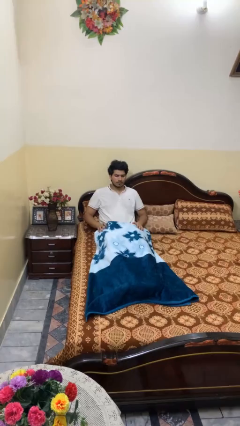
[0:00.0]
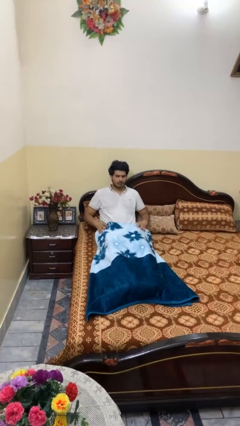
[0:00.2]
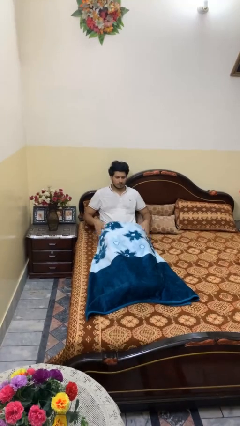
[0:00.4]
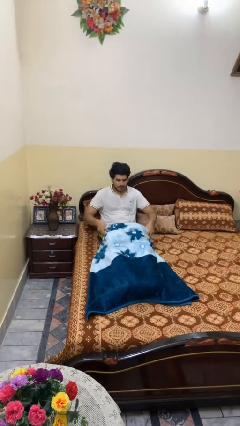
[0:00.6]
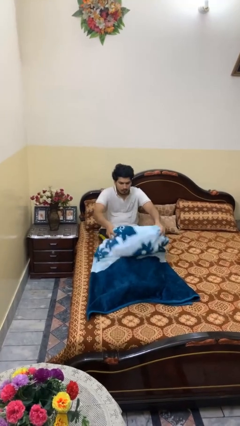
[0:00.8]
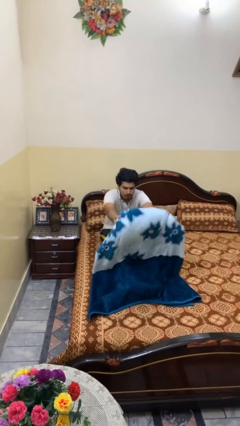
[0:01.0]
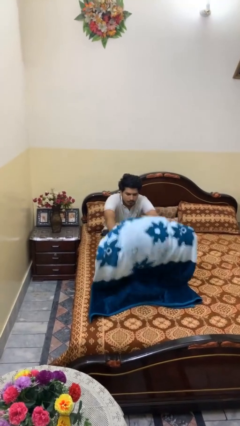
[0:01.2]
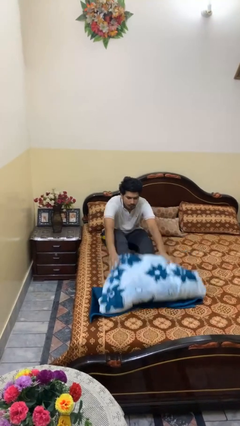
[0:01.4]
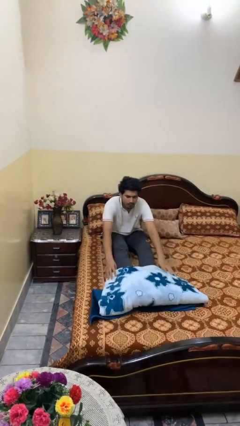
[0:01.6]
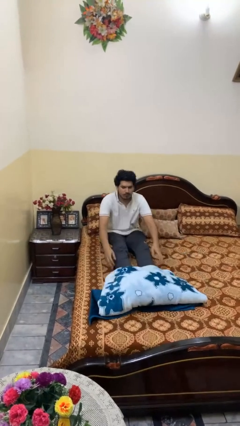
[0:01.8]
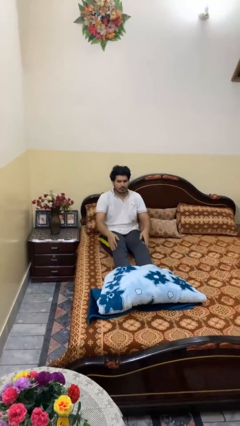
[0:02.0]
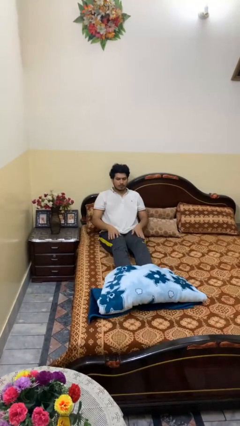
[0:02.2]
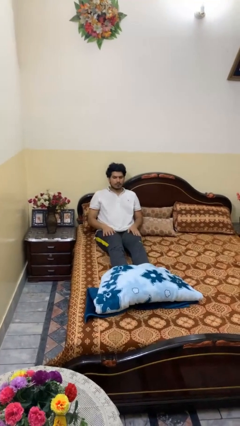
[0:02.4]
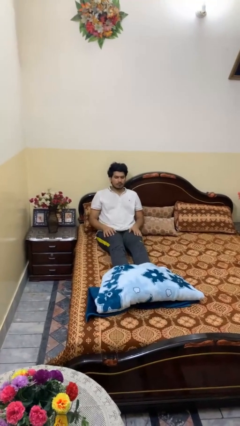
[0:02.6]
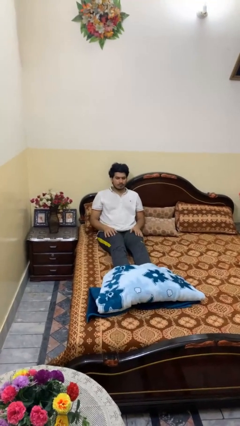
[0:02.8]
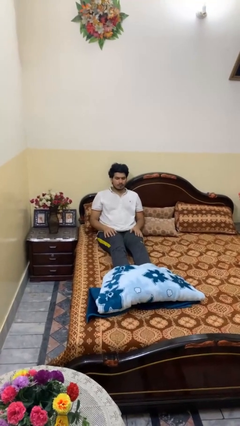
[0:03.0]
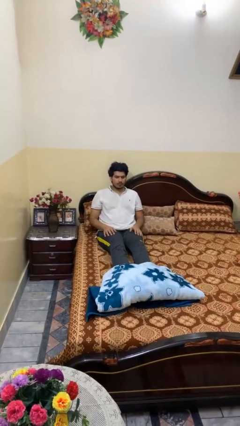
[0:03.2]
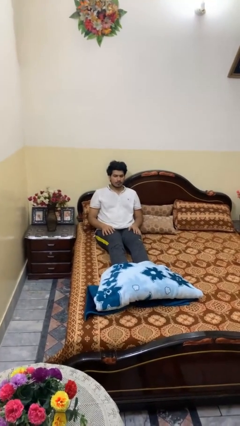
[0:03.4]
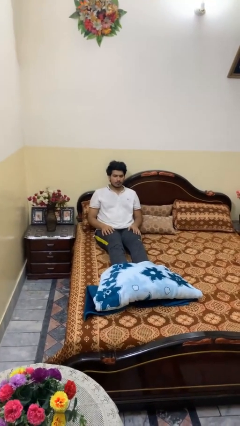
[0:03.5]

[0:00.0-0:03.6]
person uncovers with blanket

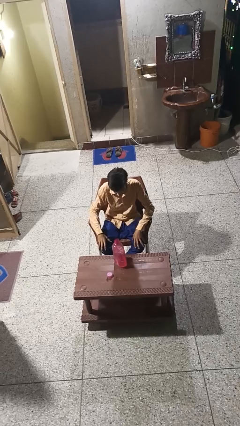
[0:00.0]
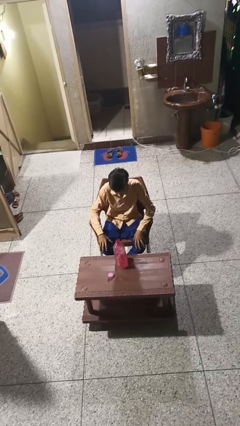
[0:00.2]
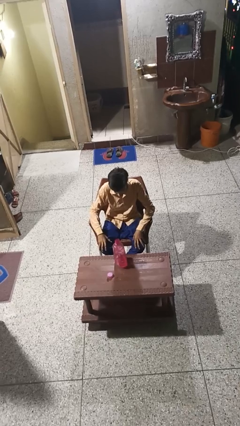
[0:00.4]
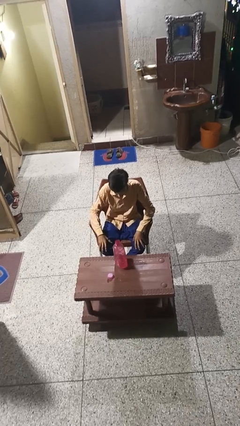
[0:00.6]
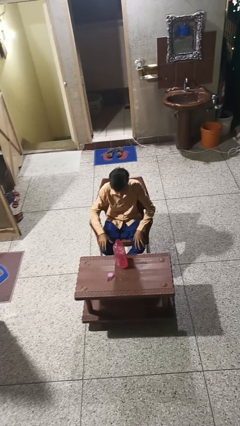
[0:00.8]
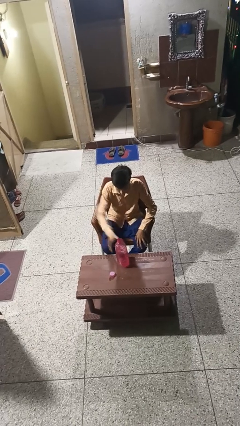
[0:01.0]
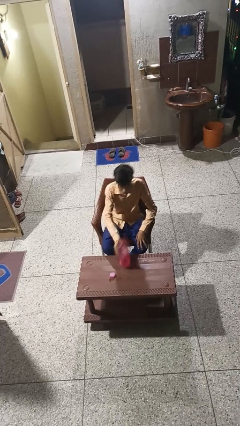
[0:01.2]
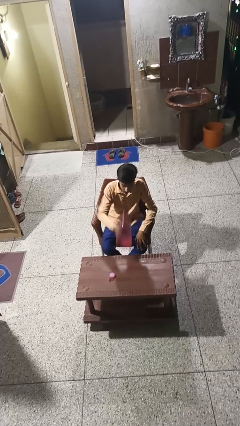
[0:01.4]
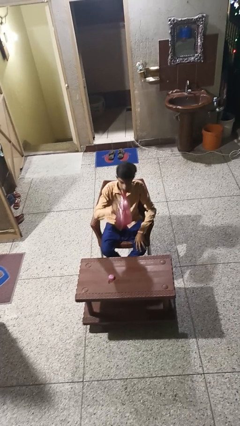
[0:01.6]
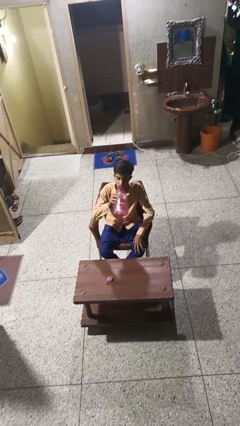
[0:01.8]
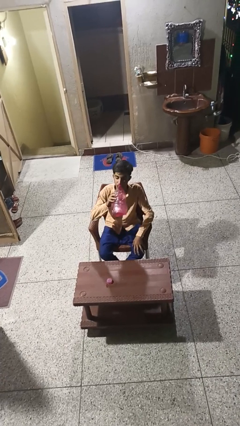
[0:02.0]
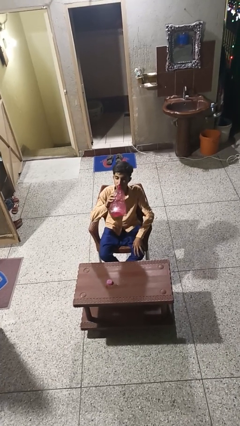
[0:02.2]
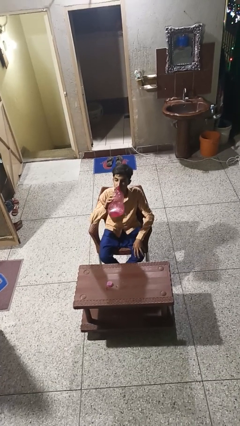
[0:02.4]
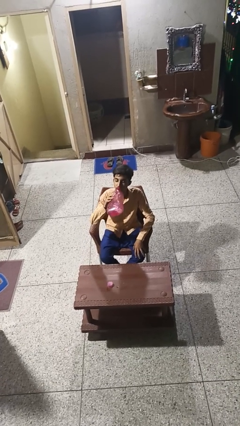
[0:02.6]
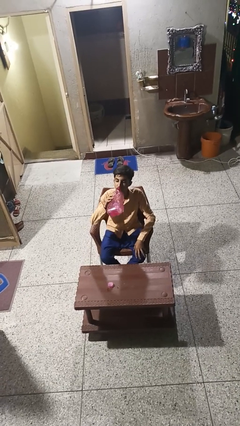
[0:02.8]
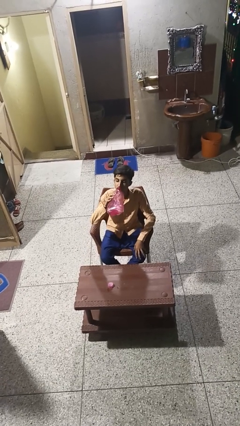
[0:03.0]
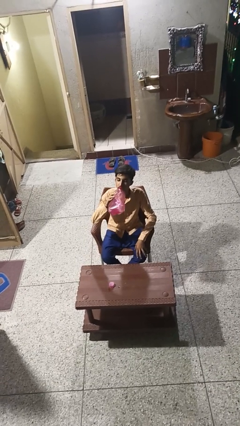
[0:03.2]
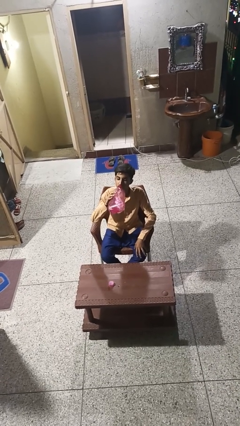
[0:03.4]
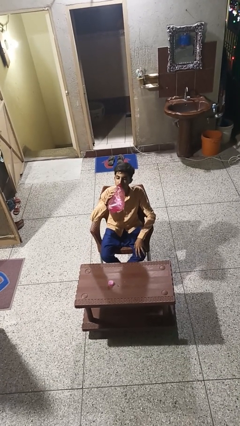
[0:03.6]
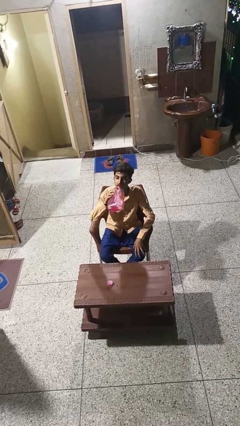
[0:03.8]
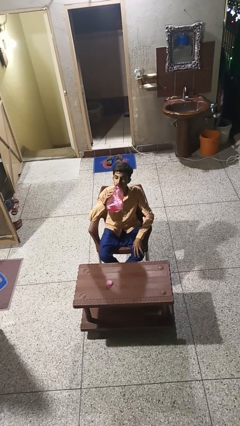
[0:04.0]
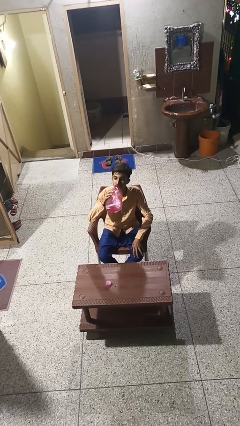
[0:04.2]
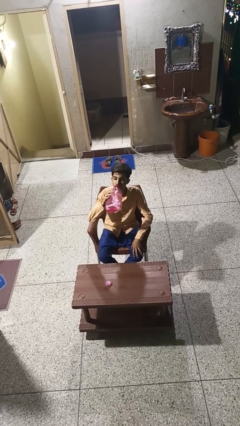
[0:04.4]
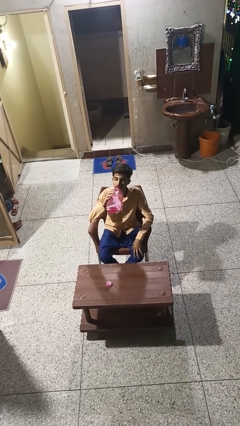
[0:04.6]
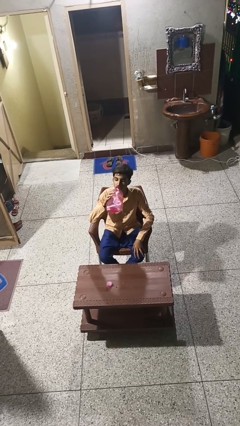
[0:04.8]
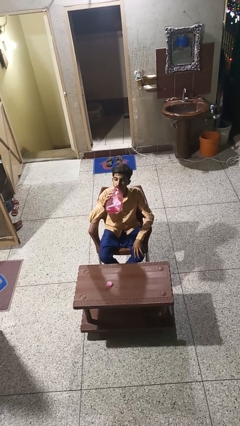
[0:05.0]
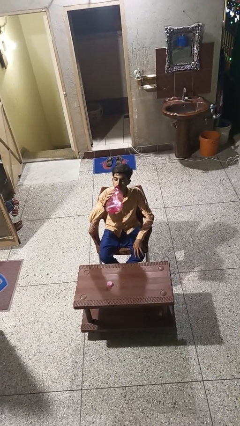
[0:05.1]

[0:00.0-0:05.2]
person drinks from bottle

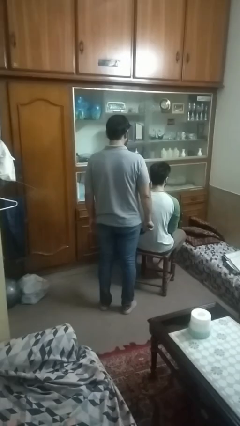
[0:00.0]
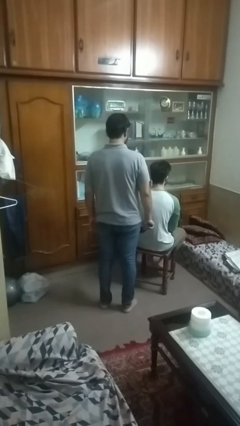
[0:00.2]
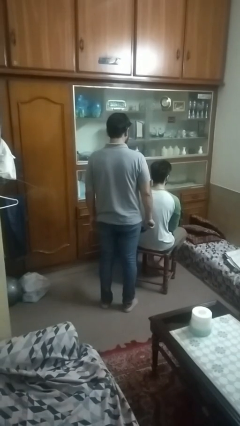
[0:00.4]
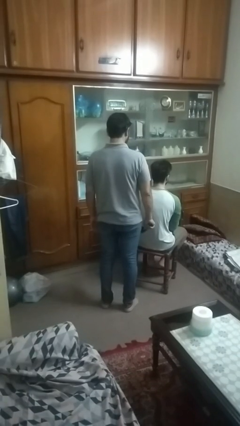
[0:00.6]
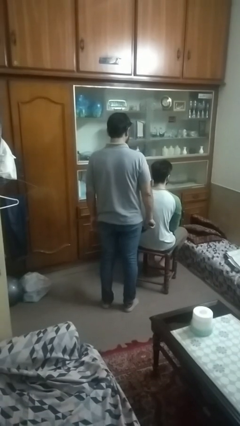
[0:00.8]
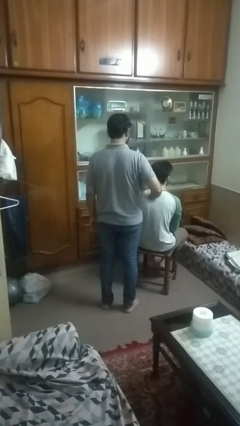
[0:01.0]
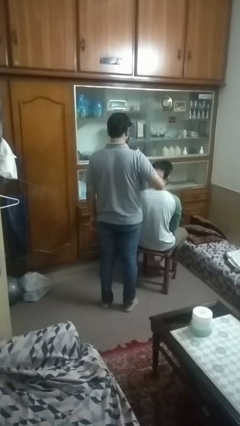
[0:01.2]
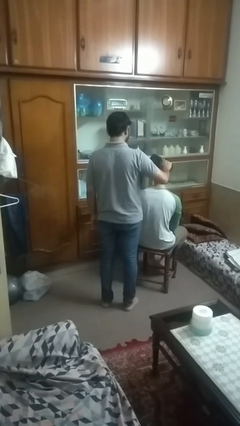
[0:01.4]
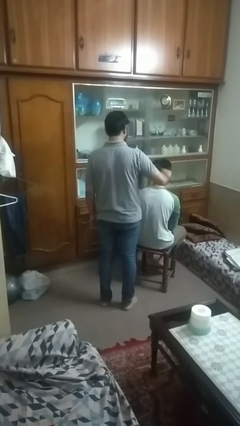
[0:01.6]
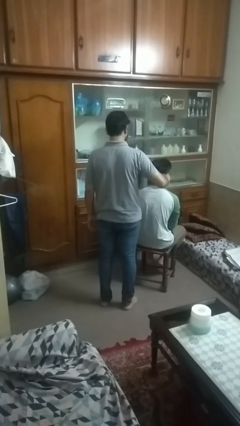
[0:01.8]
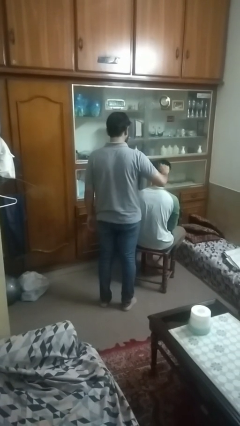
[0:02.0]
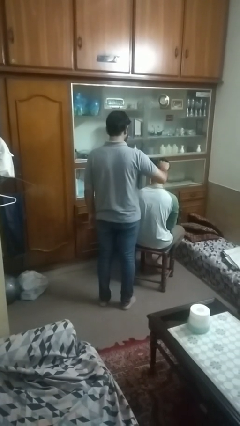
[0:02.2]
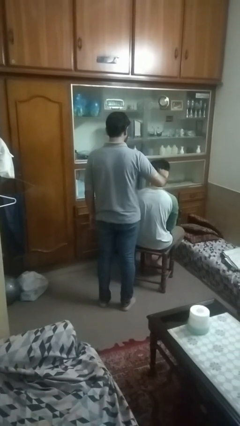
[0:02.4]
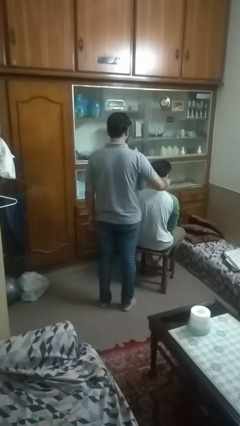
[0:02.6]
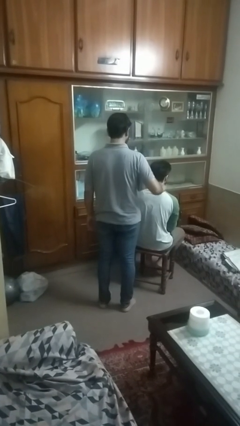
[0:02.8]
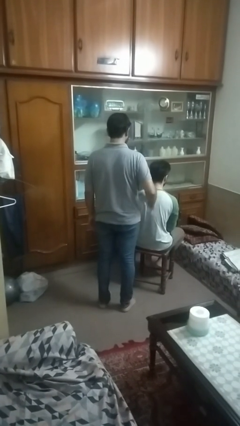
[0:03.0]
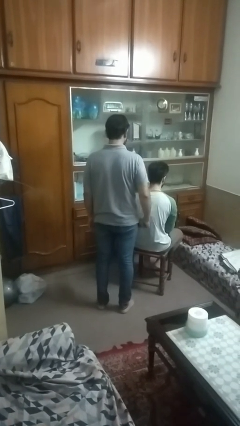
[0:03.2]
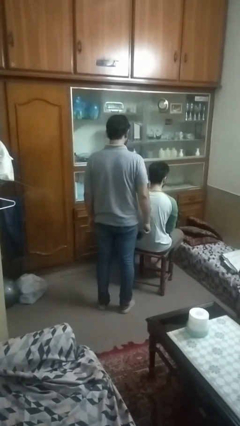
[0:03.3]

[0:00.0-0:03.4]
person brushes hair of person

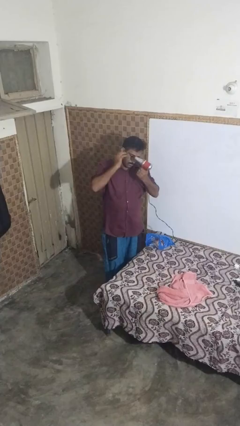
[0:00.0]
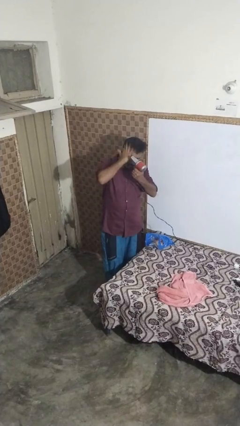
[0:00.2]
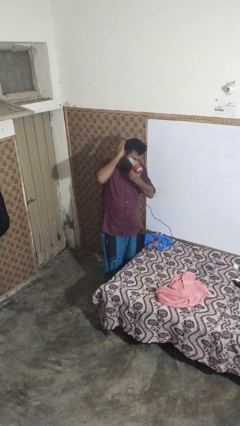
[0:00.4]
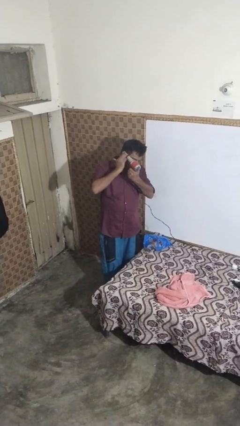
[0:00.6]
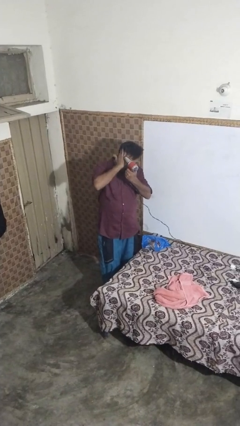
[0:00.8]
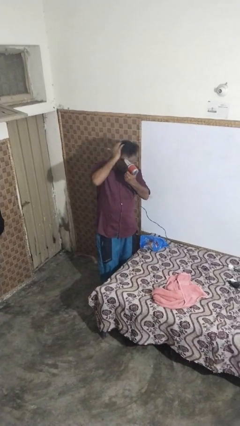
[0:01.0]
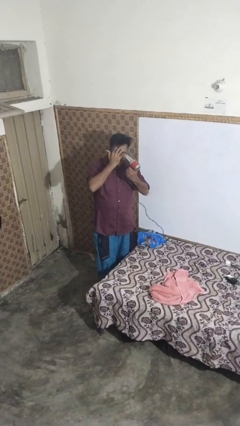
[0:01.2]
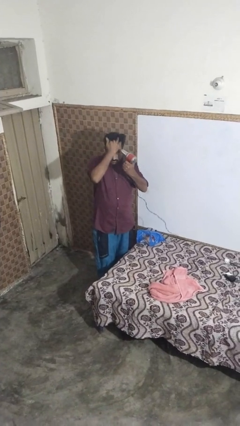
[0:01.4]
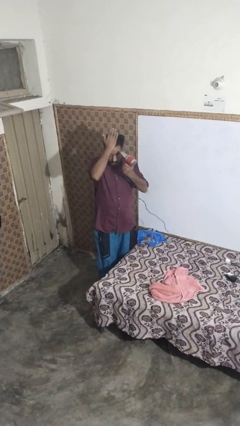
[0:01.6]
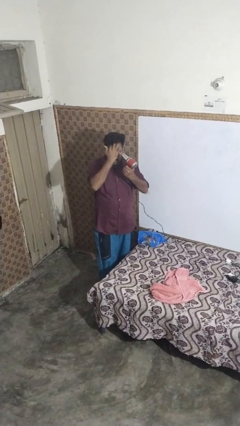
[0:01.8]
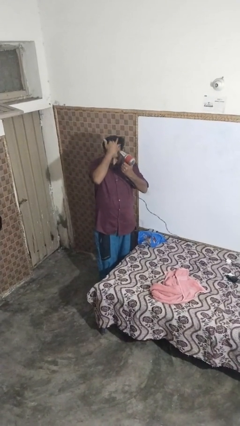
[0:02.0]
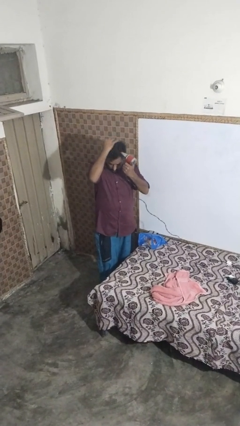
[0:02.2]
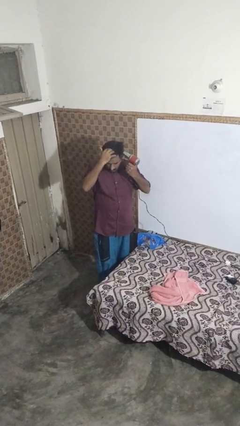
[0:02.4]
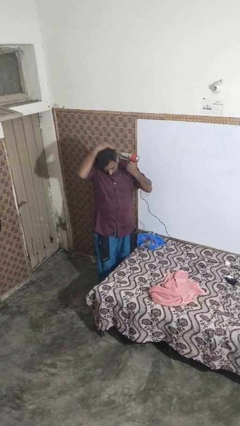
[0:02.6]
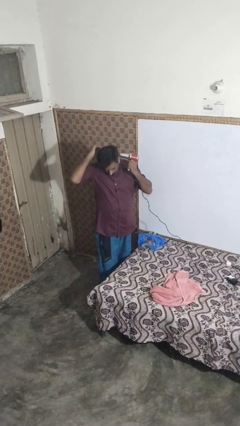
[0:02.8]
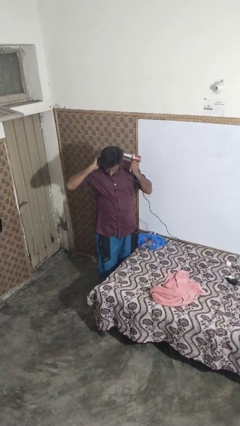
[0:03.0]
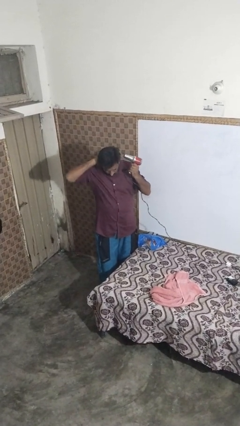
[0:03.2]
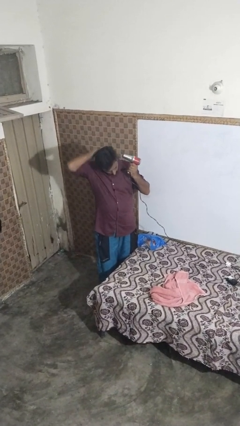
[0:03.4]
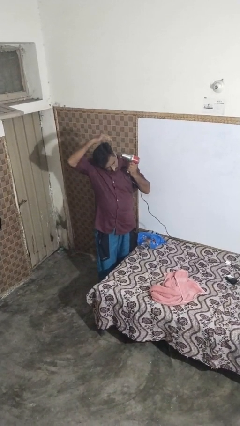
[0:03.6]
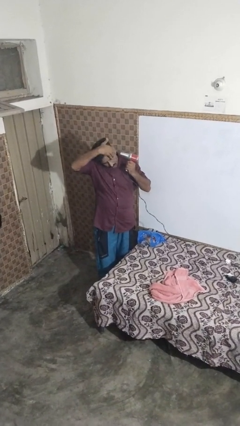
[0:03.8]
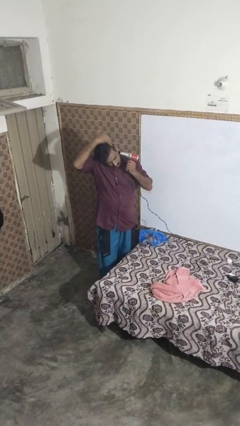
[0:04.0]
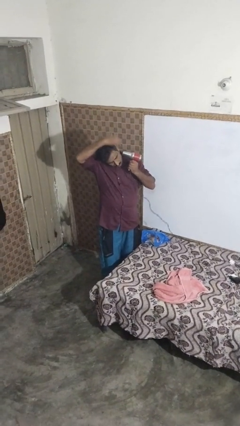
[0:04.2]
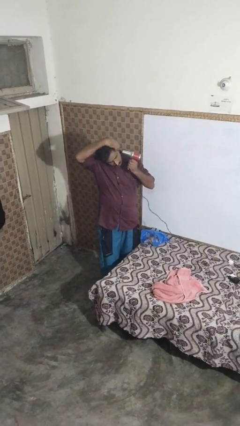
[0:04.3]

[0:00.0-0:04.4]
person dries hair with hairdryer

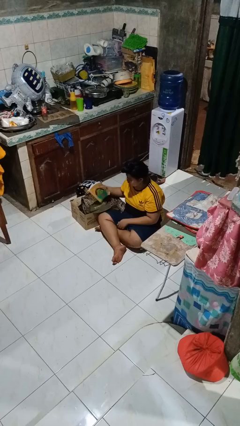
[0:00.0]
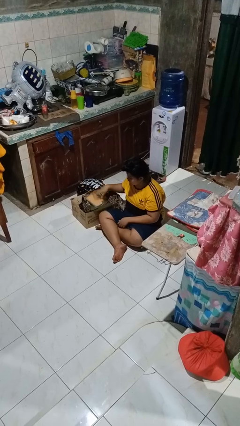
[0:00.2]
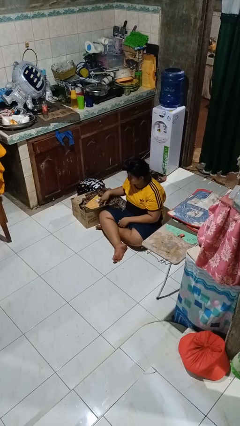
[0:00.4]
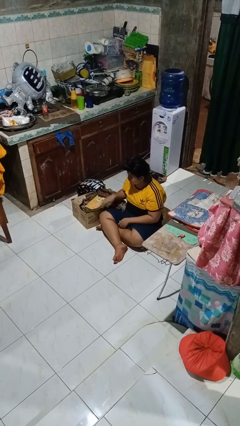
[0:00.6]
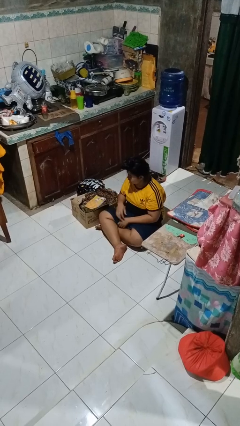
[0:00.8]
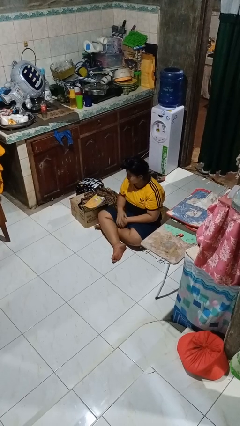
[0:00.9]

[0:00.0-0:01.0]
person puts object into box

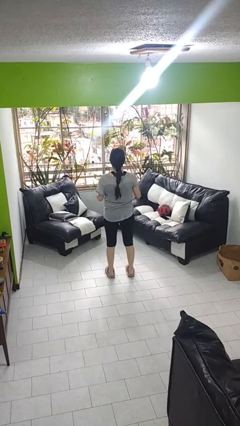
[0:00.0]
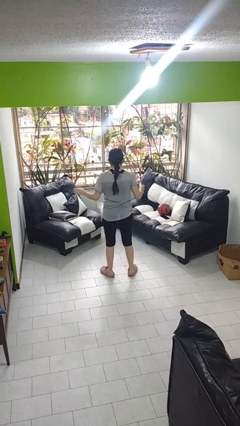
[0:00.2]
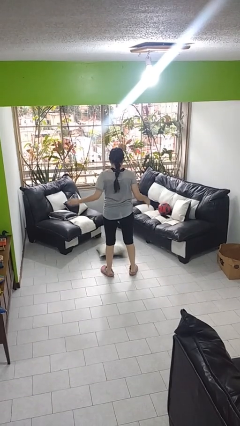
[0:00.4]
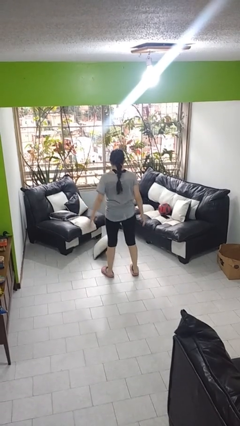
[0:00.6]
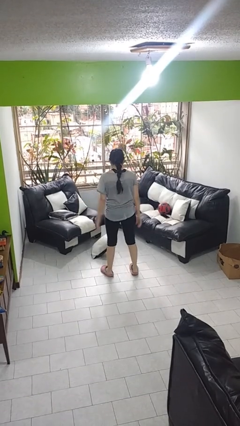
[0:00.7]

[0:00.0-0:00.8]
person drops object
